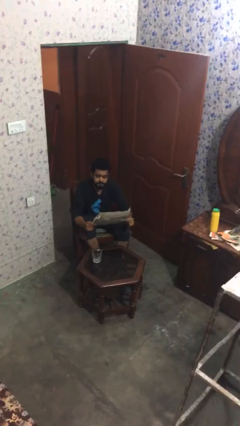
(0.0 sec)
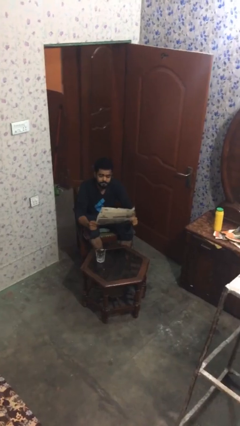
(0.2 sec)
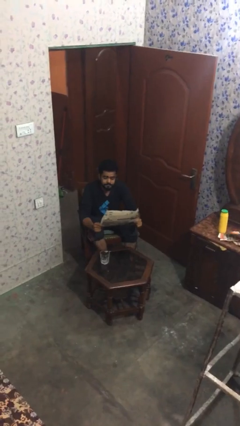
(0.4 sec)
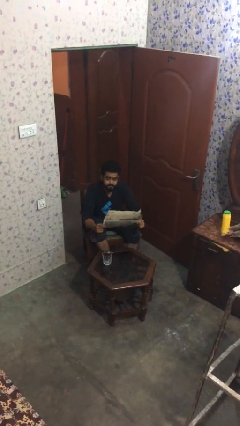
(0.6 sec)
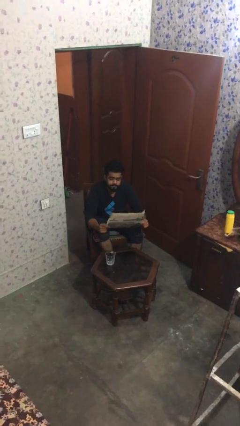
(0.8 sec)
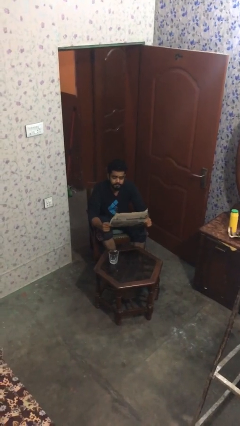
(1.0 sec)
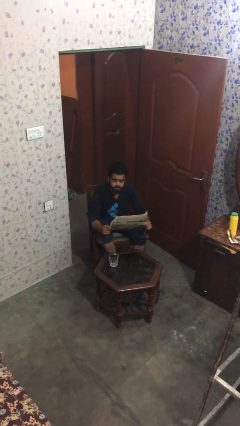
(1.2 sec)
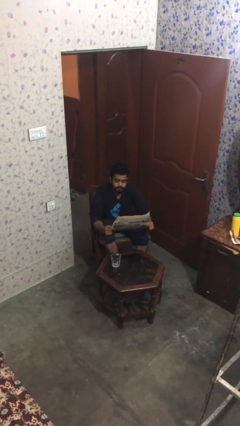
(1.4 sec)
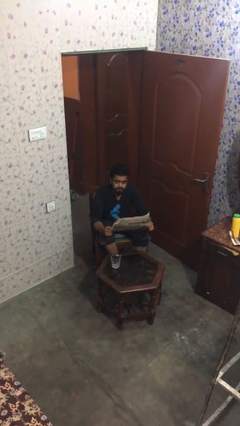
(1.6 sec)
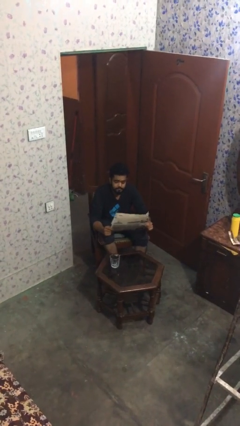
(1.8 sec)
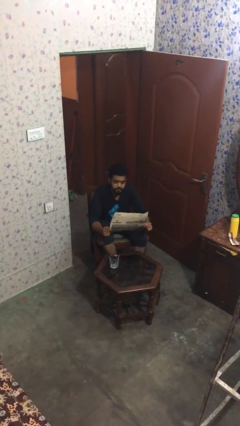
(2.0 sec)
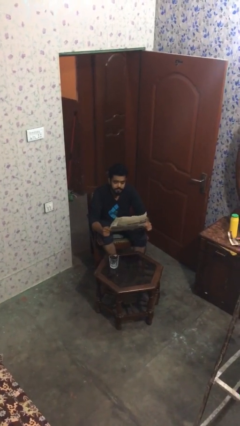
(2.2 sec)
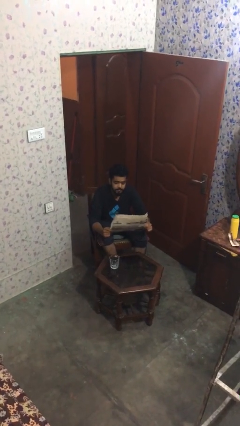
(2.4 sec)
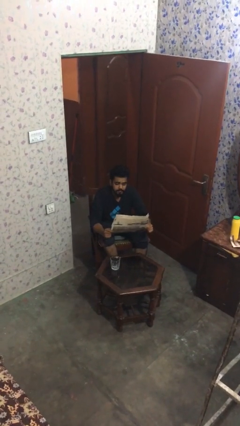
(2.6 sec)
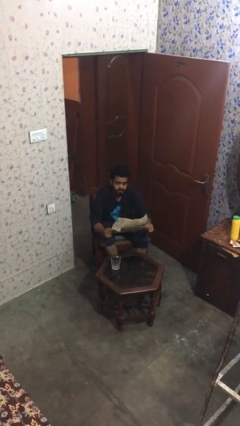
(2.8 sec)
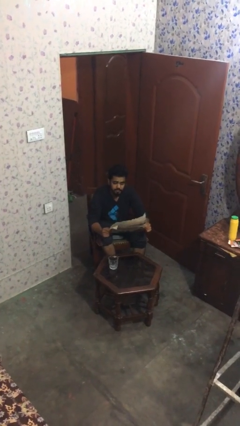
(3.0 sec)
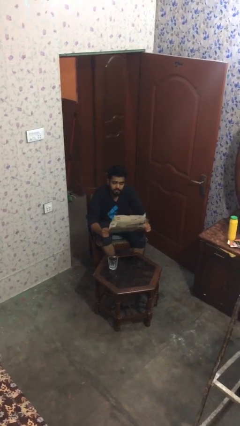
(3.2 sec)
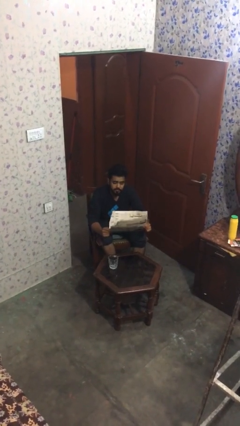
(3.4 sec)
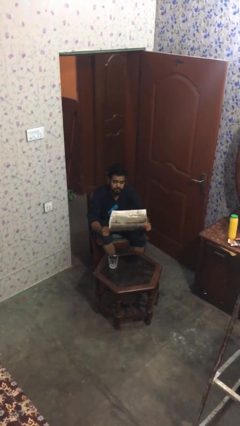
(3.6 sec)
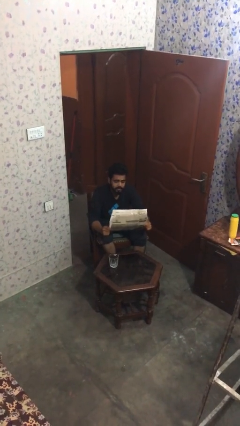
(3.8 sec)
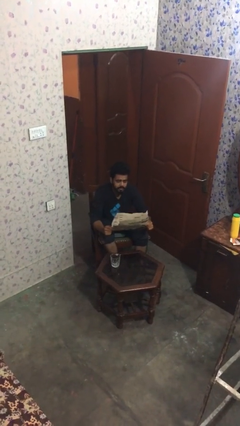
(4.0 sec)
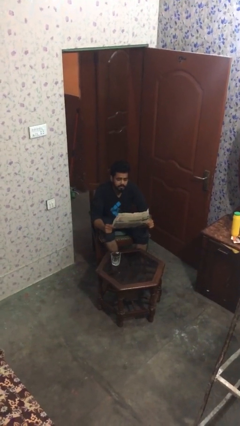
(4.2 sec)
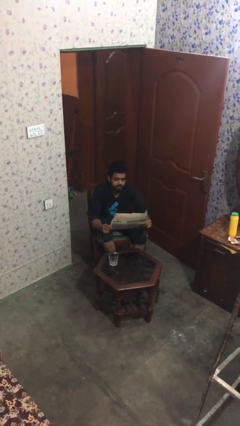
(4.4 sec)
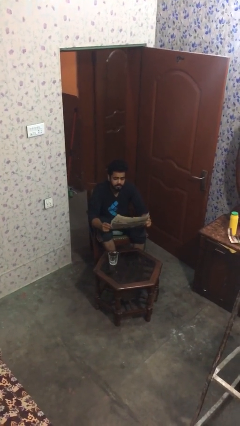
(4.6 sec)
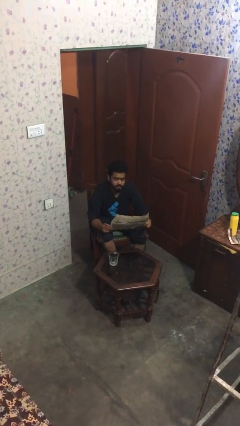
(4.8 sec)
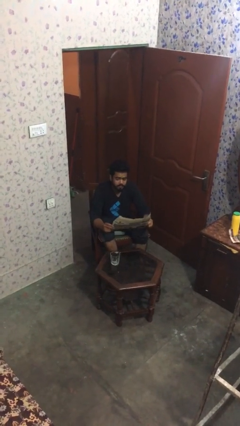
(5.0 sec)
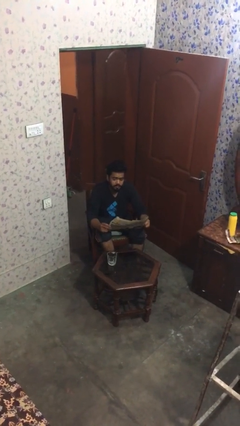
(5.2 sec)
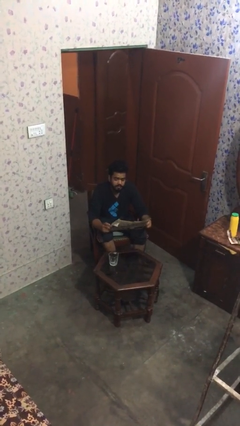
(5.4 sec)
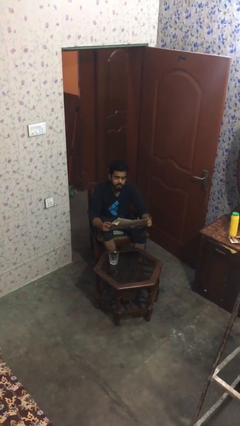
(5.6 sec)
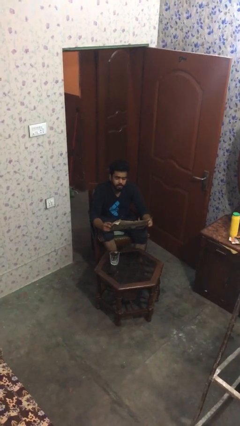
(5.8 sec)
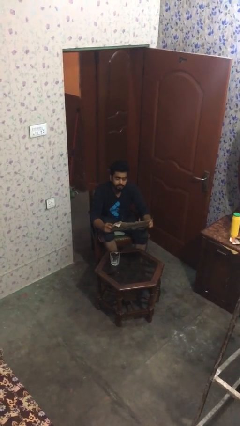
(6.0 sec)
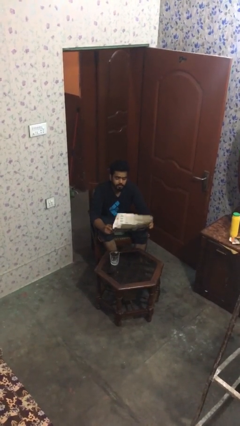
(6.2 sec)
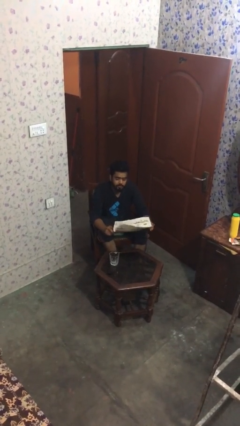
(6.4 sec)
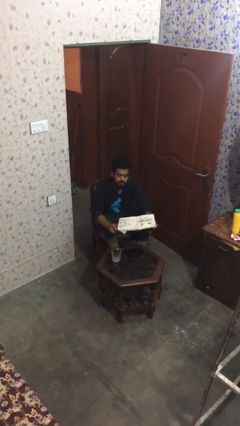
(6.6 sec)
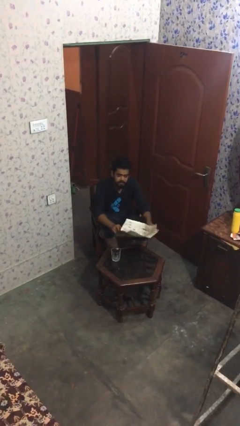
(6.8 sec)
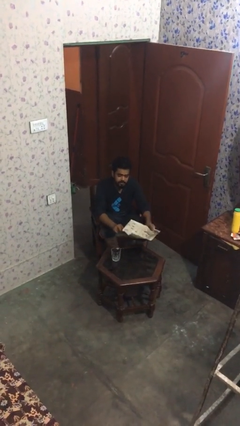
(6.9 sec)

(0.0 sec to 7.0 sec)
person reads document

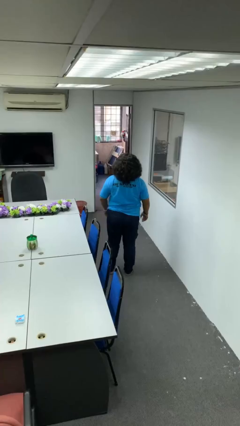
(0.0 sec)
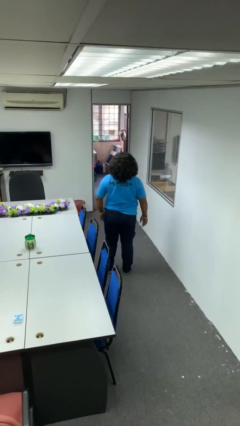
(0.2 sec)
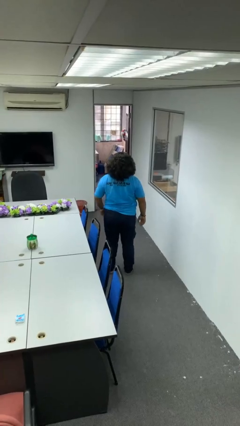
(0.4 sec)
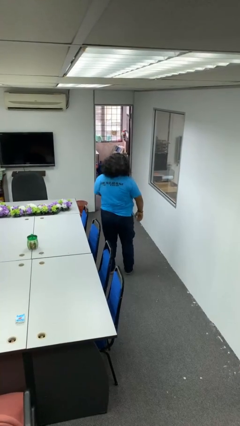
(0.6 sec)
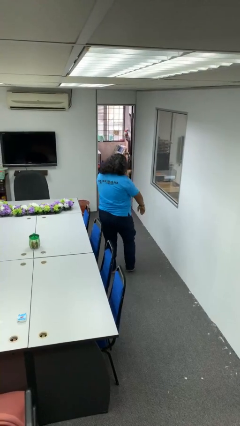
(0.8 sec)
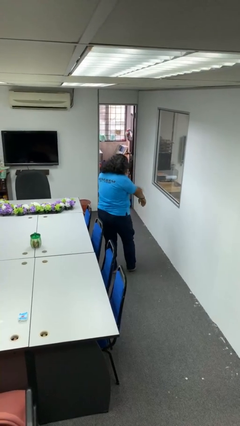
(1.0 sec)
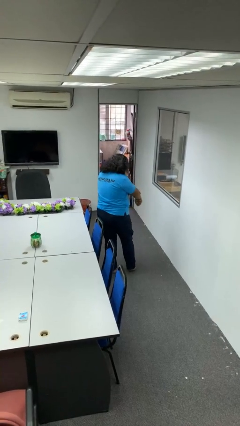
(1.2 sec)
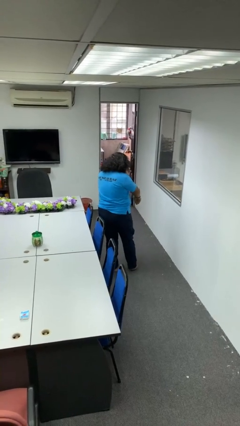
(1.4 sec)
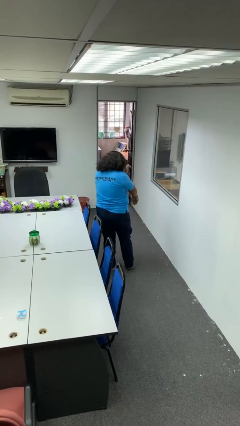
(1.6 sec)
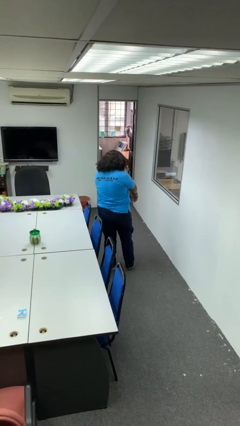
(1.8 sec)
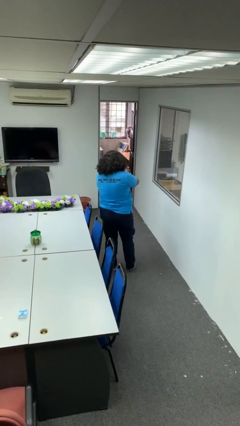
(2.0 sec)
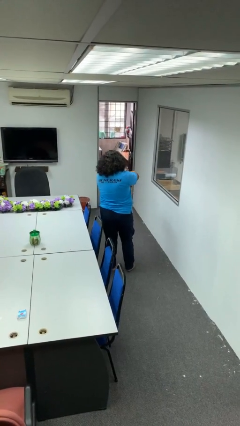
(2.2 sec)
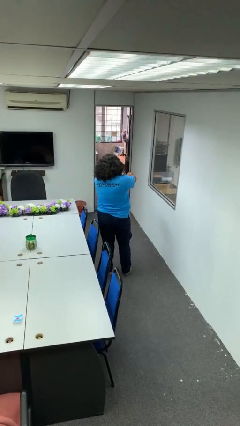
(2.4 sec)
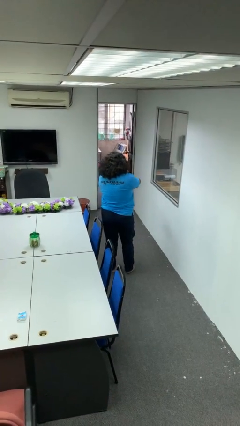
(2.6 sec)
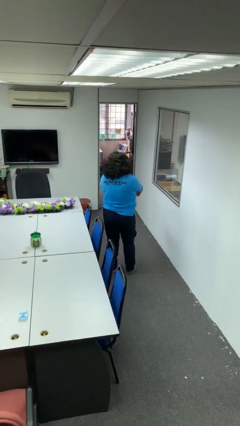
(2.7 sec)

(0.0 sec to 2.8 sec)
person swats bug

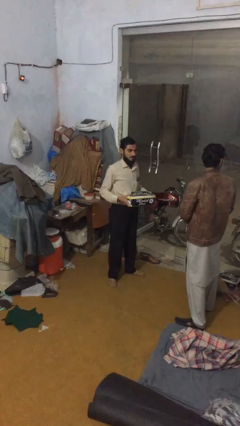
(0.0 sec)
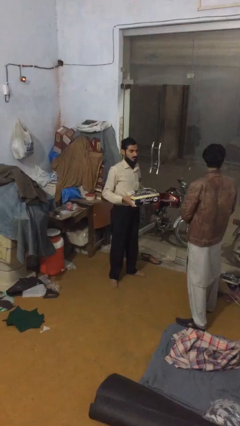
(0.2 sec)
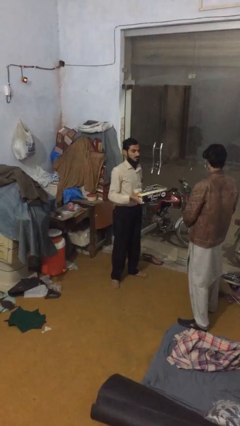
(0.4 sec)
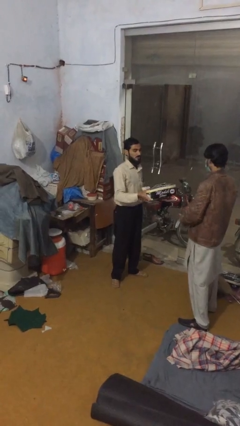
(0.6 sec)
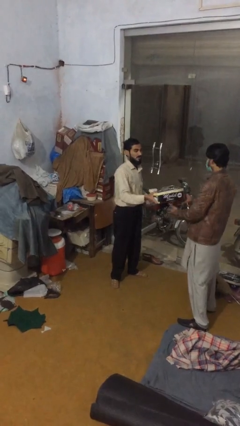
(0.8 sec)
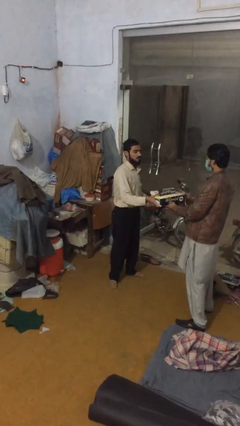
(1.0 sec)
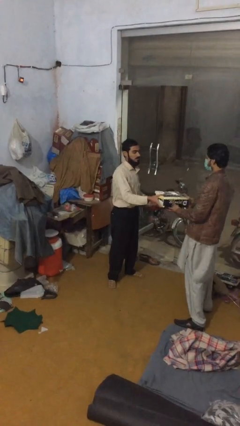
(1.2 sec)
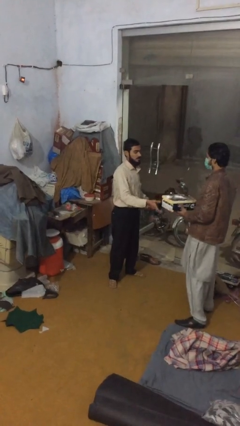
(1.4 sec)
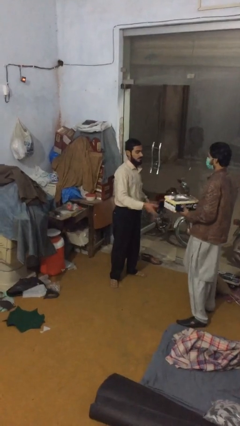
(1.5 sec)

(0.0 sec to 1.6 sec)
person transfers object to person

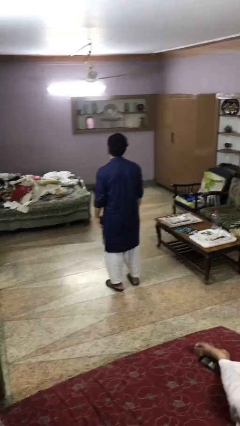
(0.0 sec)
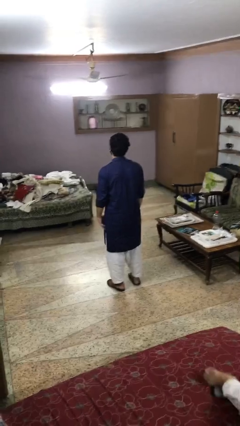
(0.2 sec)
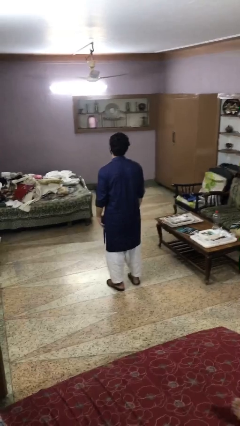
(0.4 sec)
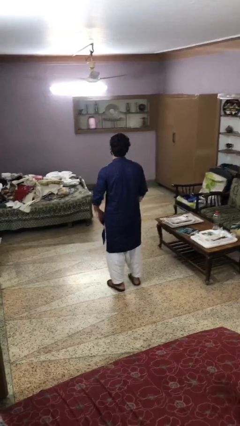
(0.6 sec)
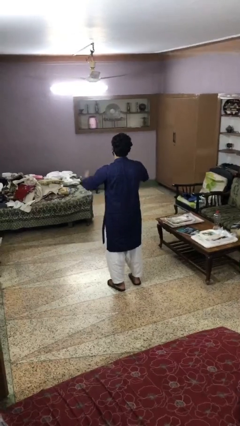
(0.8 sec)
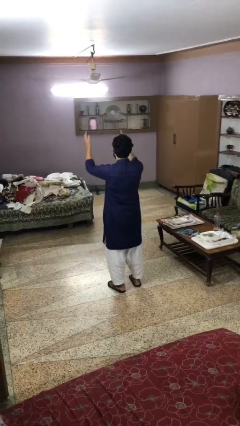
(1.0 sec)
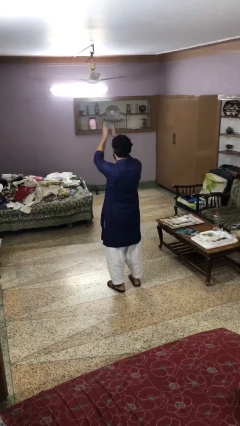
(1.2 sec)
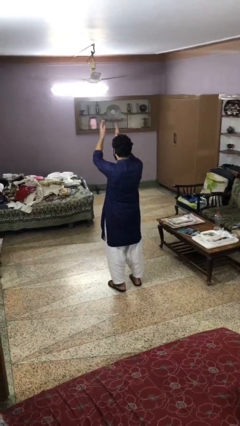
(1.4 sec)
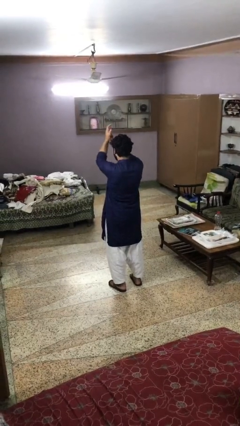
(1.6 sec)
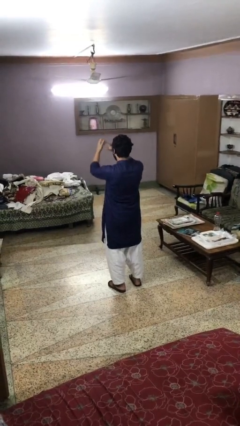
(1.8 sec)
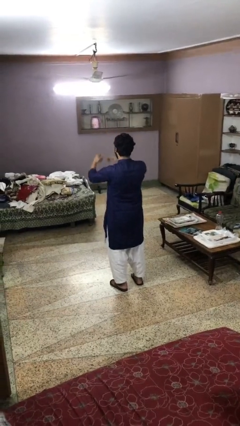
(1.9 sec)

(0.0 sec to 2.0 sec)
person claps hands

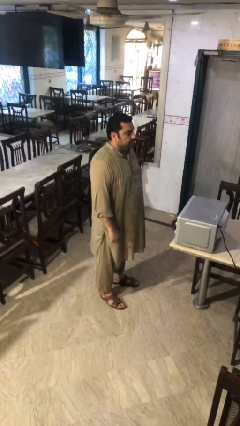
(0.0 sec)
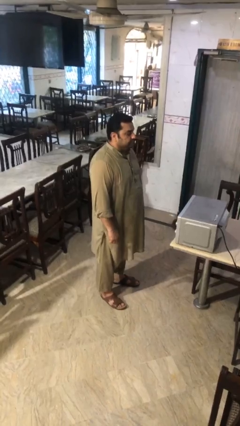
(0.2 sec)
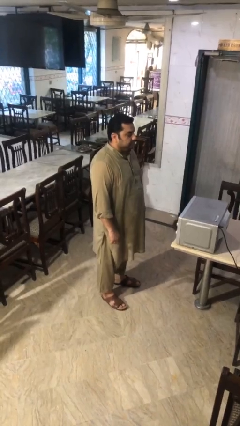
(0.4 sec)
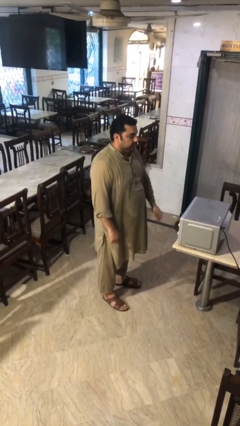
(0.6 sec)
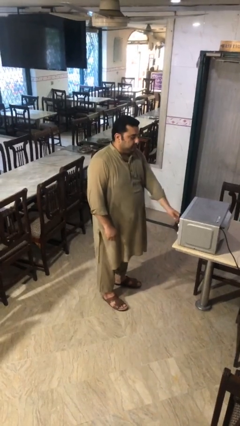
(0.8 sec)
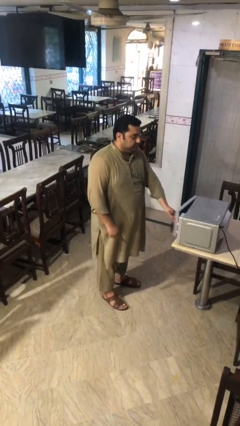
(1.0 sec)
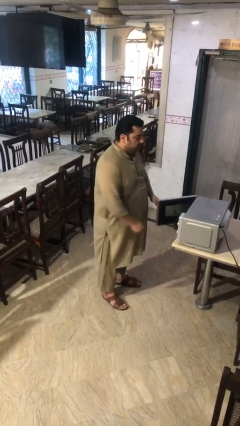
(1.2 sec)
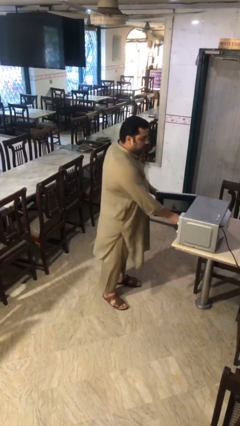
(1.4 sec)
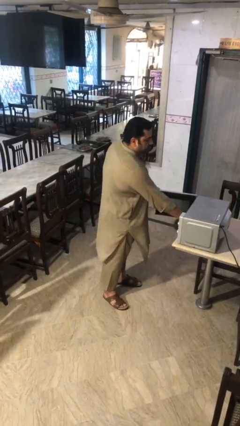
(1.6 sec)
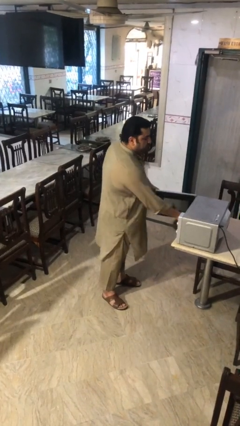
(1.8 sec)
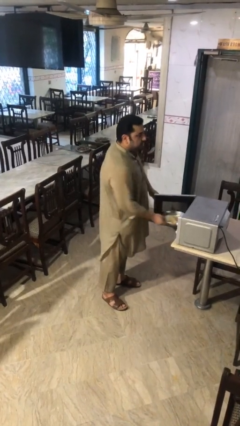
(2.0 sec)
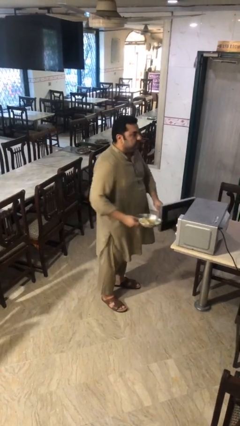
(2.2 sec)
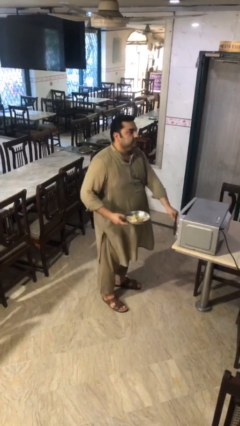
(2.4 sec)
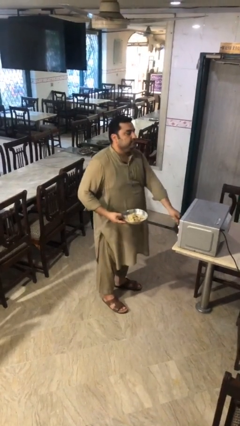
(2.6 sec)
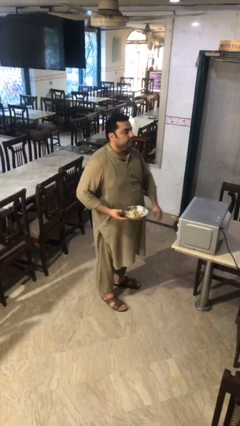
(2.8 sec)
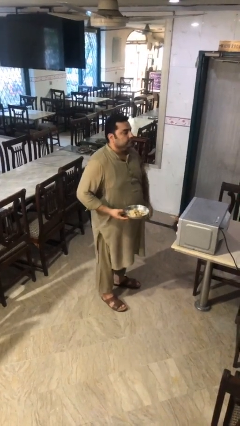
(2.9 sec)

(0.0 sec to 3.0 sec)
person takes object from microwave

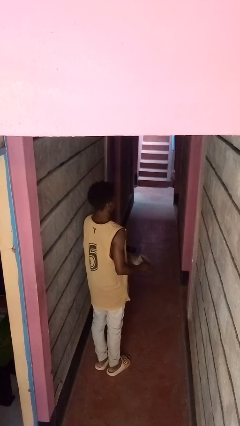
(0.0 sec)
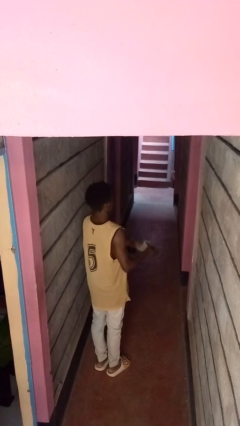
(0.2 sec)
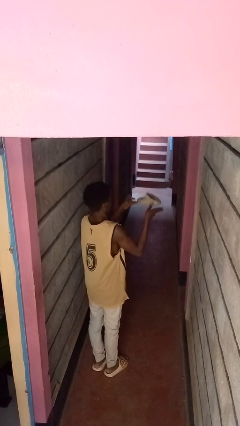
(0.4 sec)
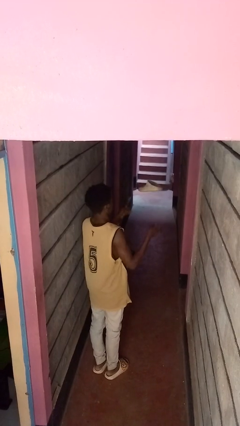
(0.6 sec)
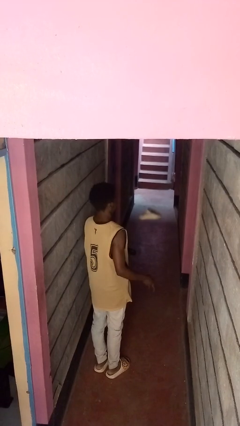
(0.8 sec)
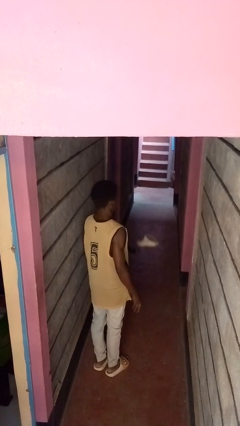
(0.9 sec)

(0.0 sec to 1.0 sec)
person throws object into air
